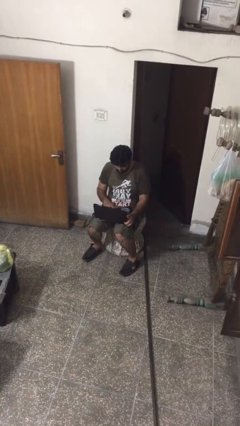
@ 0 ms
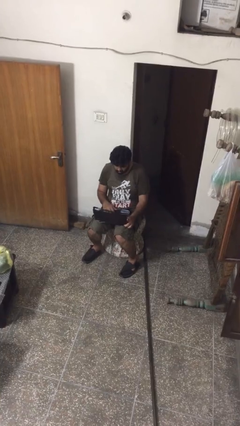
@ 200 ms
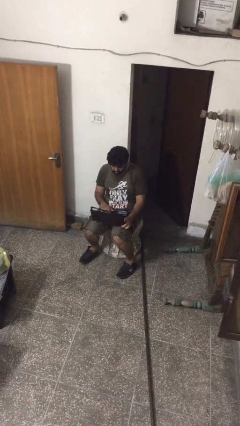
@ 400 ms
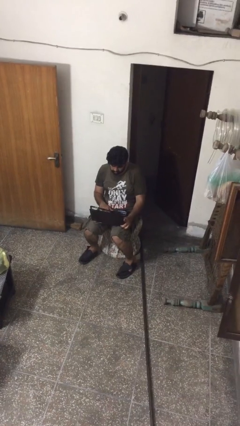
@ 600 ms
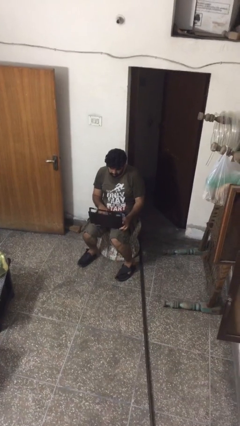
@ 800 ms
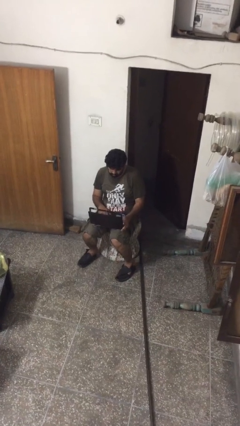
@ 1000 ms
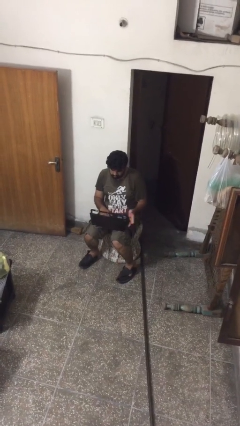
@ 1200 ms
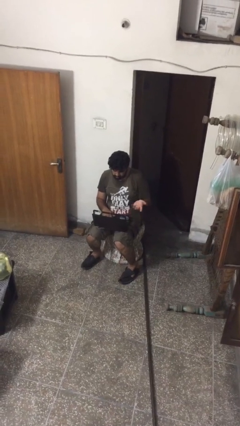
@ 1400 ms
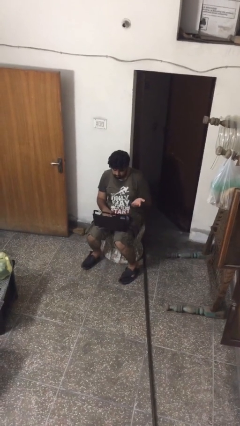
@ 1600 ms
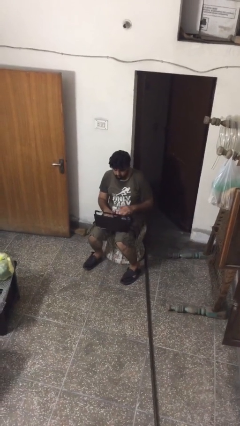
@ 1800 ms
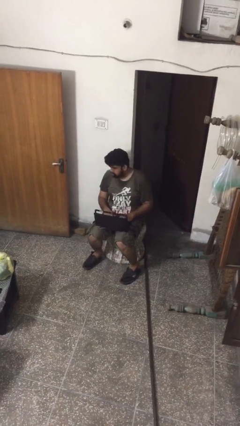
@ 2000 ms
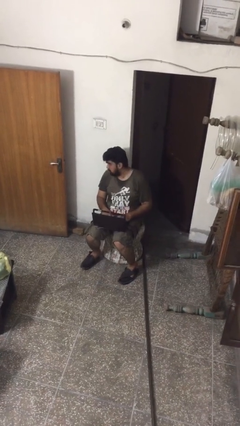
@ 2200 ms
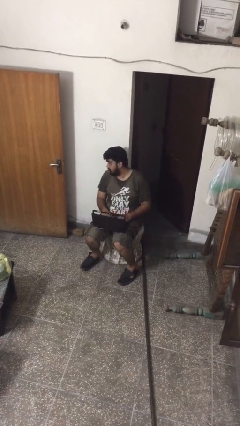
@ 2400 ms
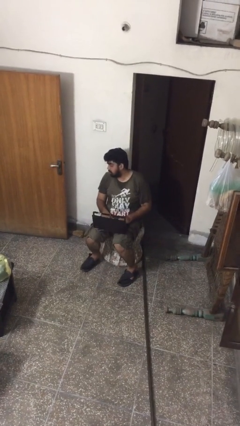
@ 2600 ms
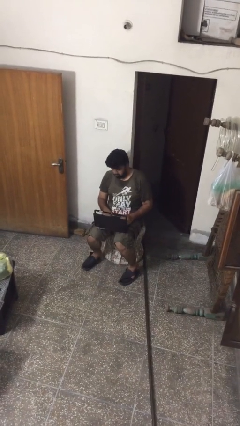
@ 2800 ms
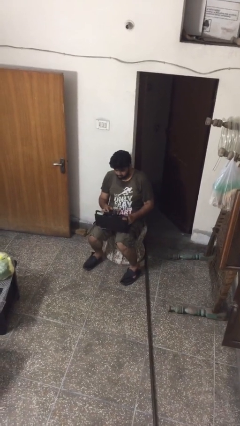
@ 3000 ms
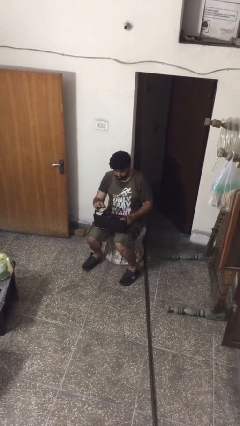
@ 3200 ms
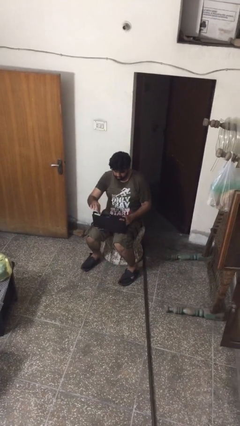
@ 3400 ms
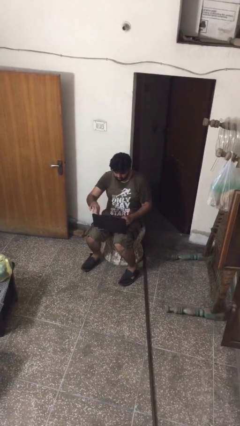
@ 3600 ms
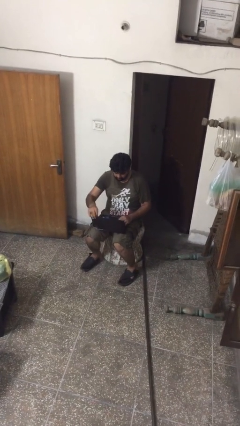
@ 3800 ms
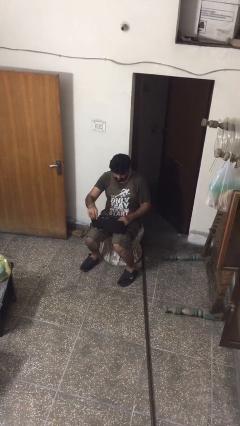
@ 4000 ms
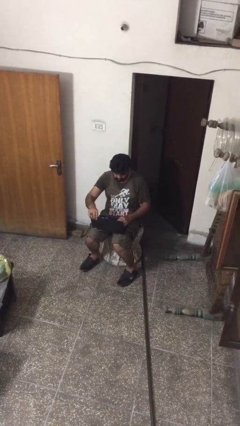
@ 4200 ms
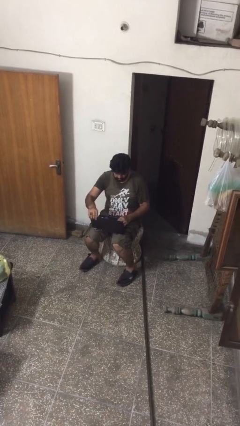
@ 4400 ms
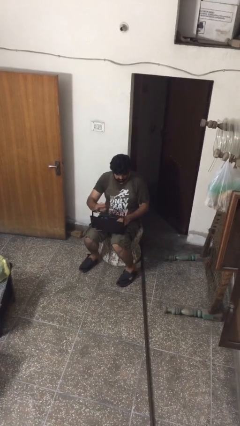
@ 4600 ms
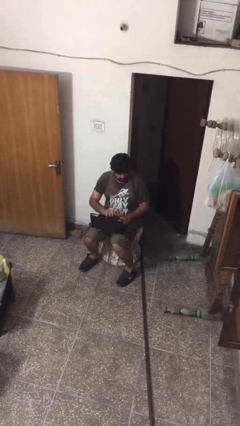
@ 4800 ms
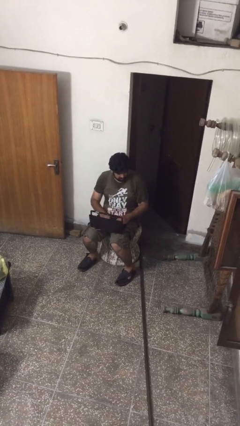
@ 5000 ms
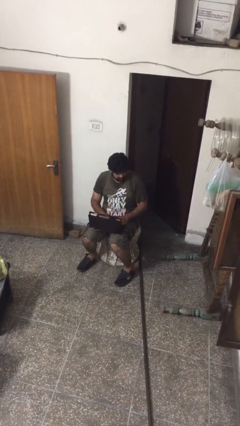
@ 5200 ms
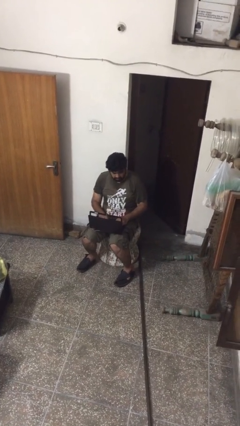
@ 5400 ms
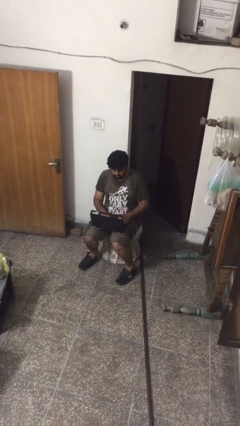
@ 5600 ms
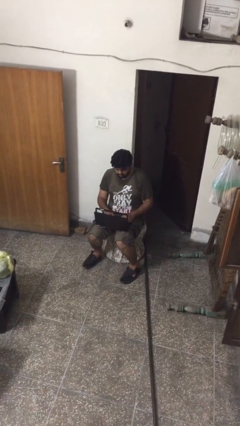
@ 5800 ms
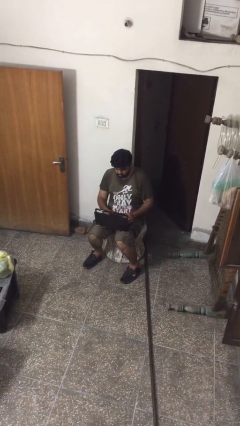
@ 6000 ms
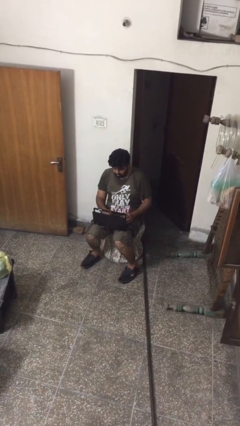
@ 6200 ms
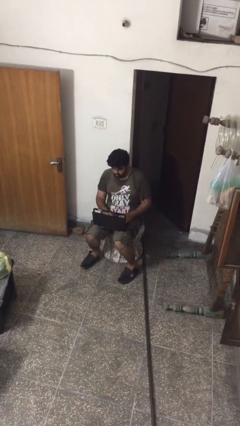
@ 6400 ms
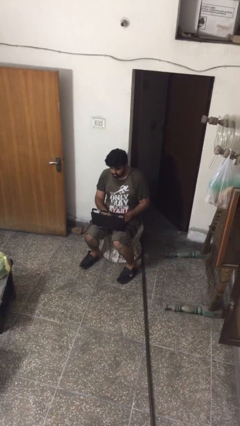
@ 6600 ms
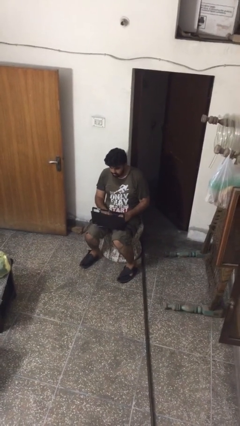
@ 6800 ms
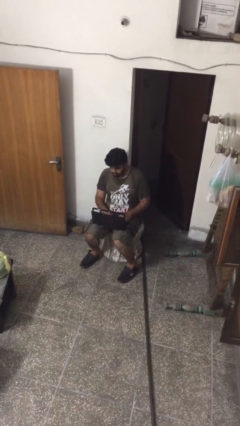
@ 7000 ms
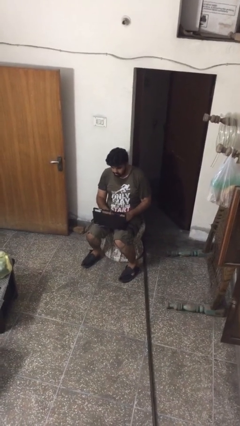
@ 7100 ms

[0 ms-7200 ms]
person interacts with laptop

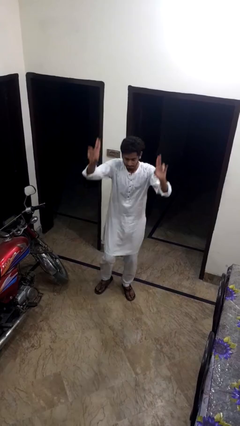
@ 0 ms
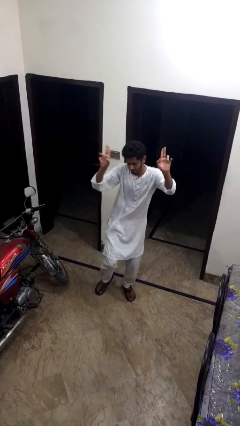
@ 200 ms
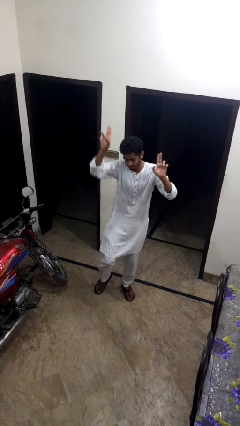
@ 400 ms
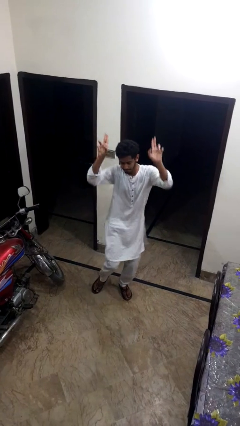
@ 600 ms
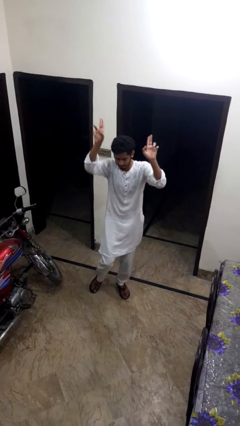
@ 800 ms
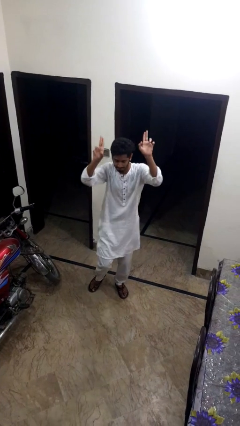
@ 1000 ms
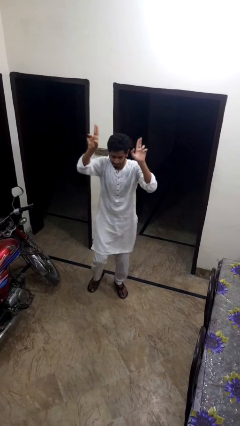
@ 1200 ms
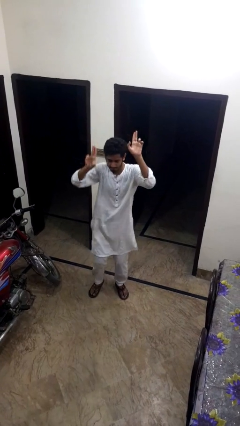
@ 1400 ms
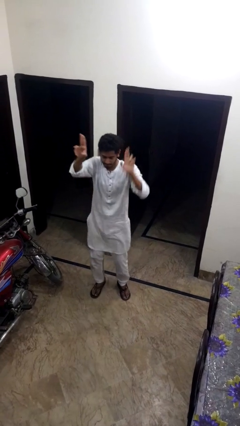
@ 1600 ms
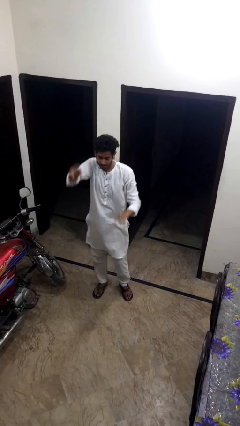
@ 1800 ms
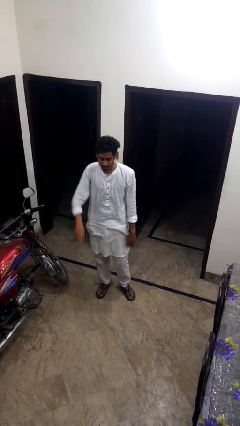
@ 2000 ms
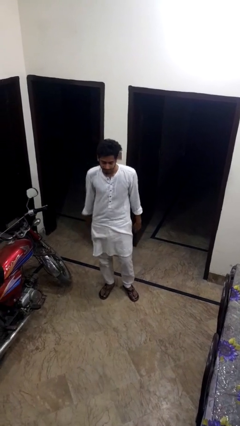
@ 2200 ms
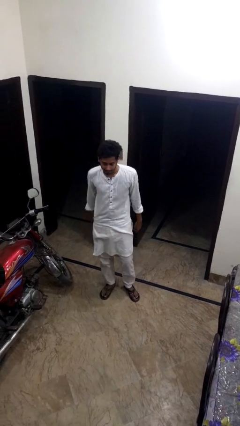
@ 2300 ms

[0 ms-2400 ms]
person dances in place

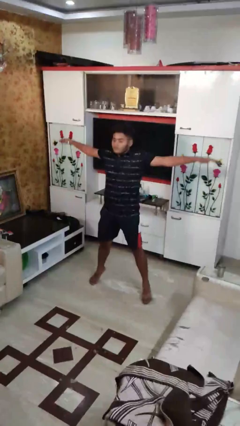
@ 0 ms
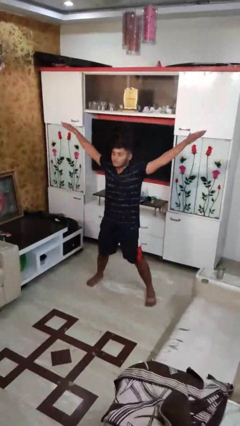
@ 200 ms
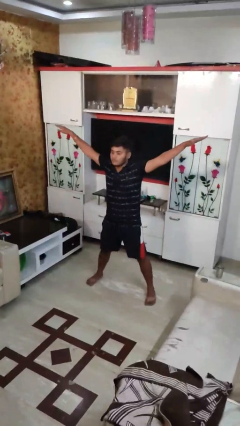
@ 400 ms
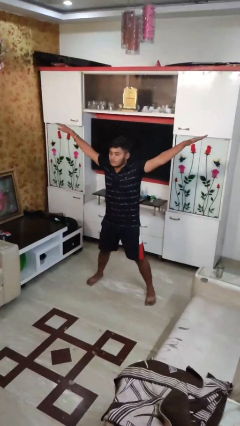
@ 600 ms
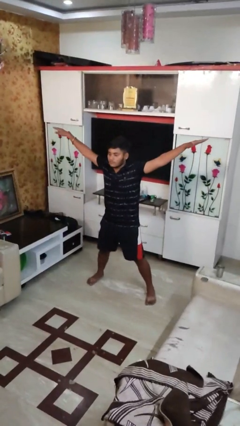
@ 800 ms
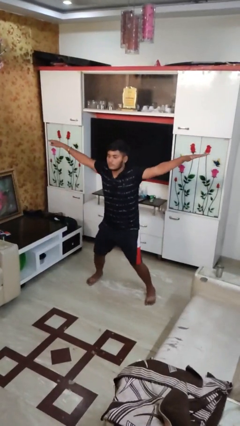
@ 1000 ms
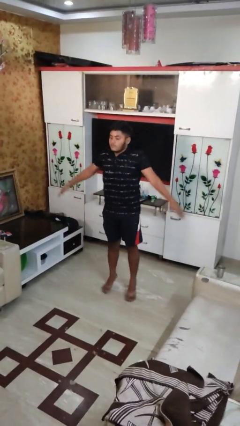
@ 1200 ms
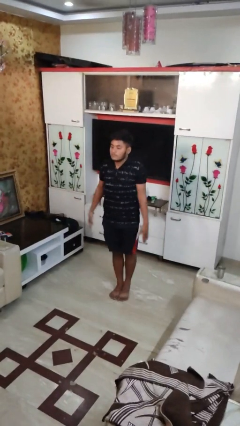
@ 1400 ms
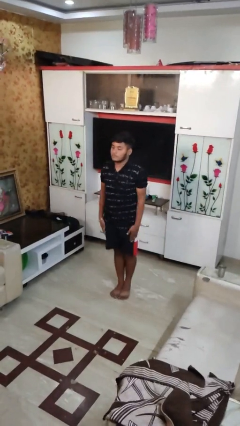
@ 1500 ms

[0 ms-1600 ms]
person exercises with jumping jacks

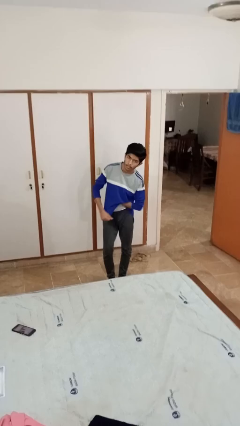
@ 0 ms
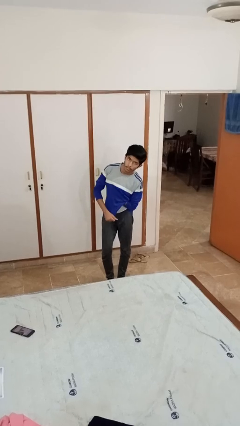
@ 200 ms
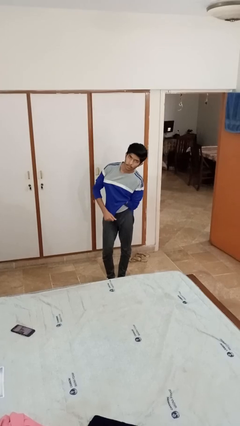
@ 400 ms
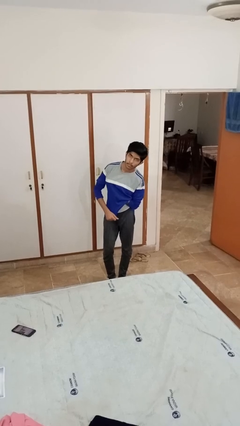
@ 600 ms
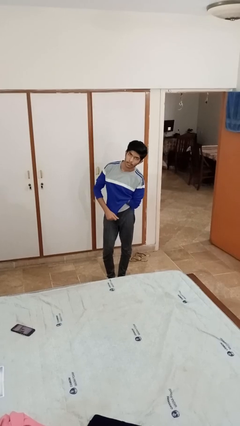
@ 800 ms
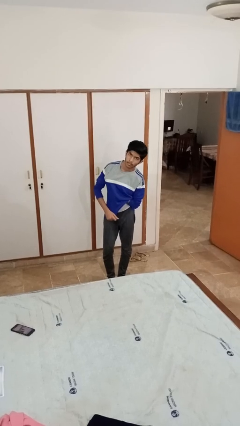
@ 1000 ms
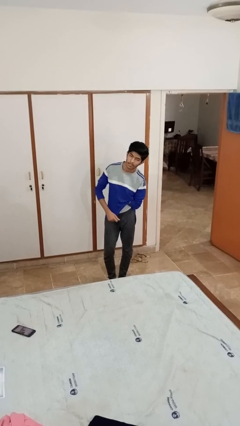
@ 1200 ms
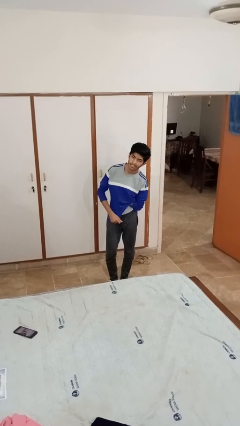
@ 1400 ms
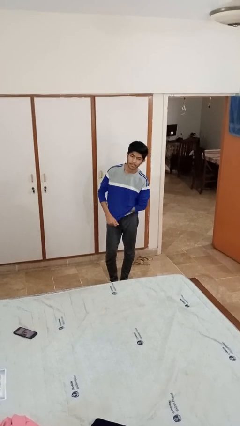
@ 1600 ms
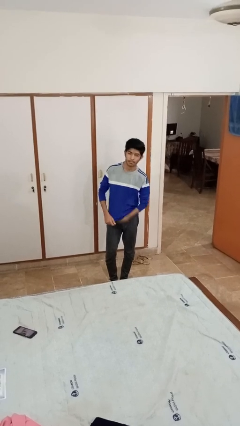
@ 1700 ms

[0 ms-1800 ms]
person applies deodorant

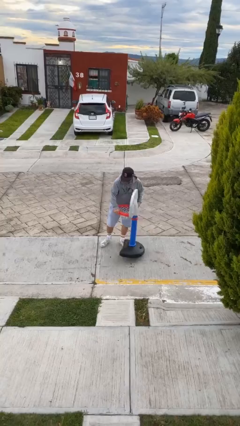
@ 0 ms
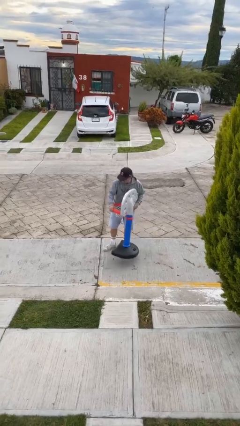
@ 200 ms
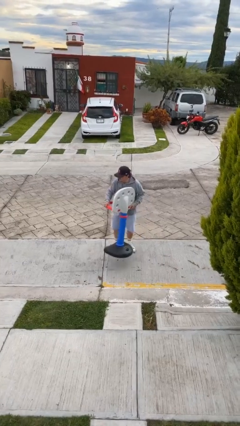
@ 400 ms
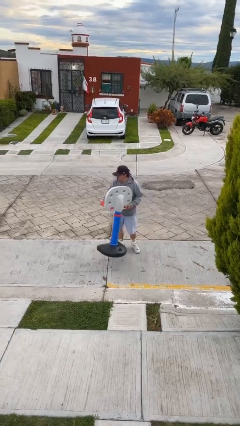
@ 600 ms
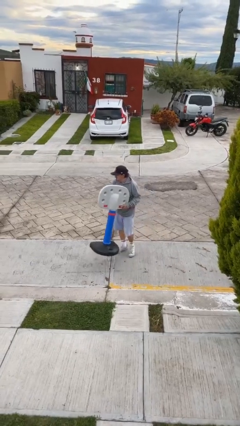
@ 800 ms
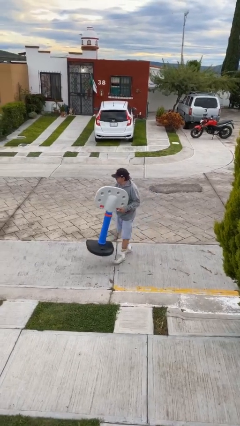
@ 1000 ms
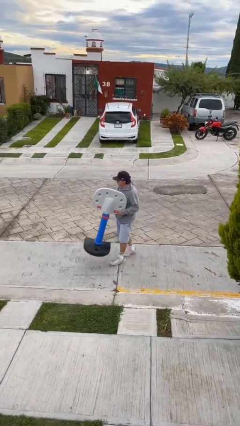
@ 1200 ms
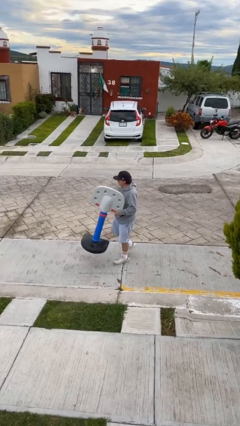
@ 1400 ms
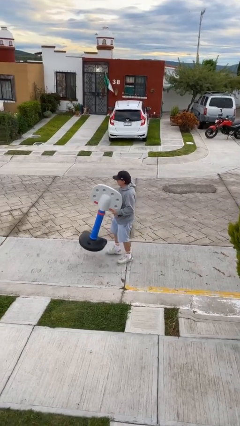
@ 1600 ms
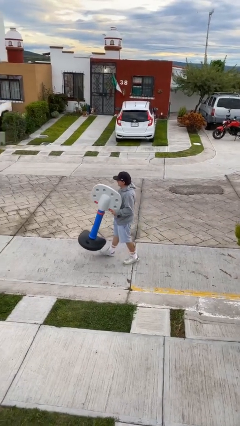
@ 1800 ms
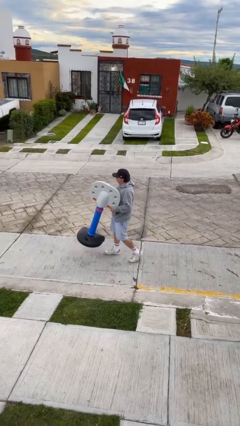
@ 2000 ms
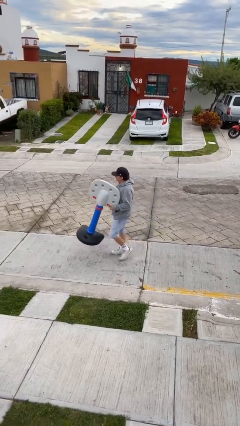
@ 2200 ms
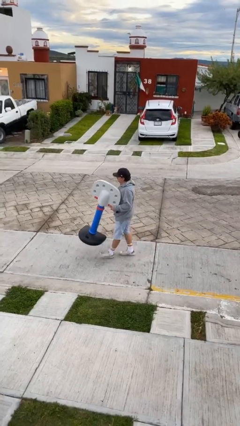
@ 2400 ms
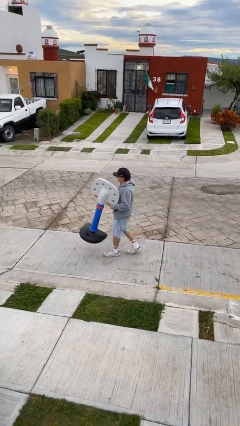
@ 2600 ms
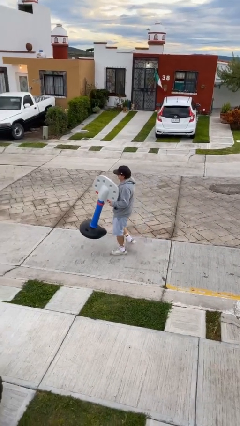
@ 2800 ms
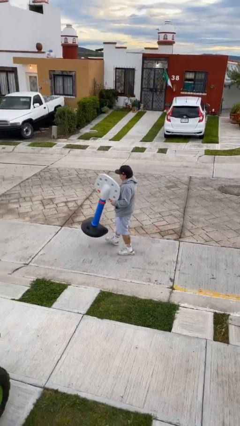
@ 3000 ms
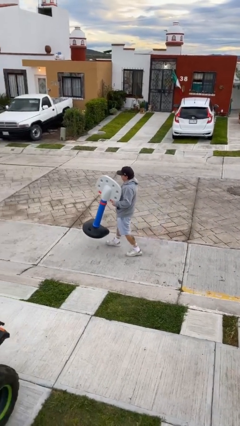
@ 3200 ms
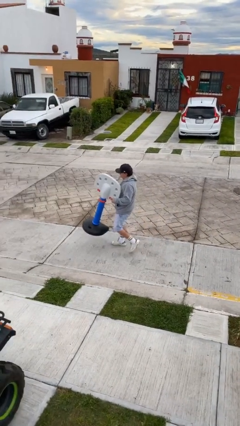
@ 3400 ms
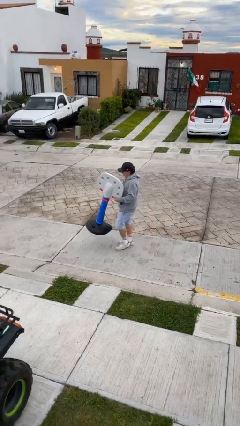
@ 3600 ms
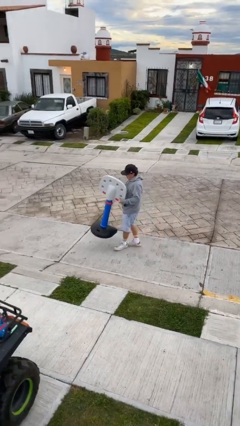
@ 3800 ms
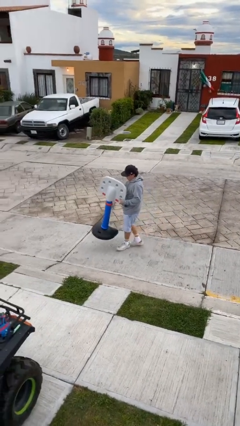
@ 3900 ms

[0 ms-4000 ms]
person carries heavy object

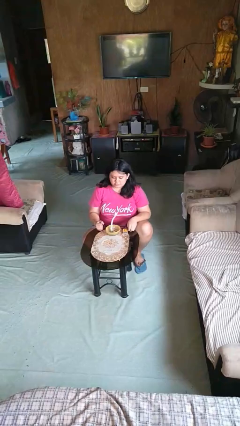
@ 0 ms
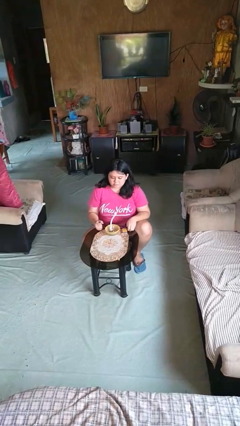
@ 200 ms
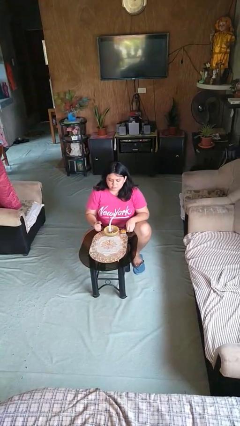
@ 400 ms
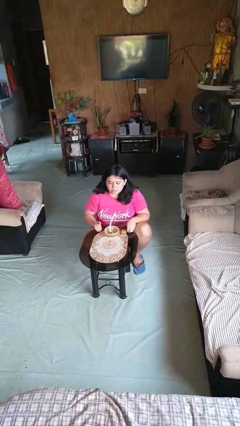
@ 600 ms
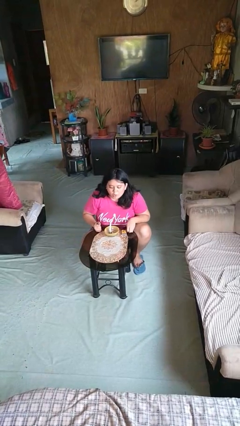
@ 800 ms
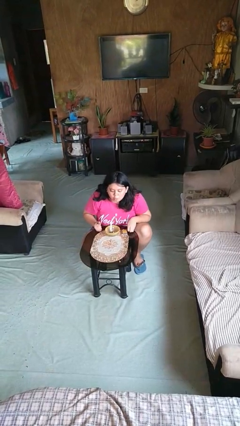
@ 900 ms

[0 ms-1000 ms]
person extinguishes candle
